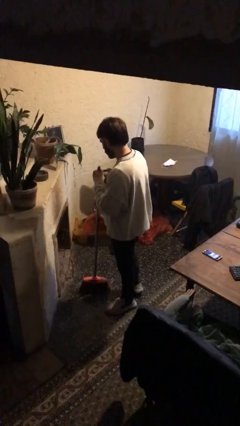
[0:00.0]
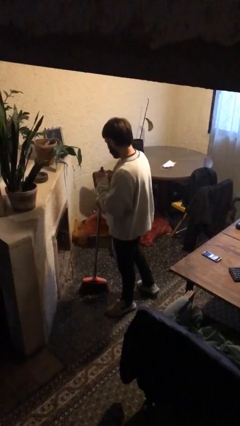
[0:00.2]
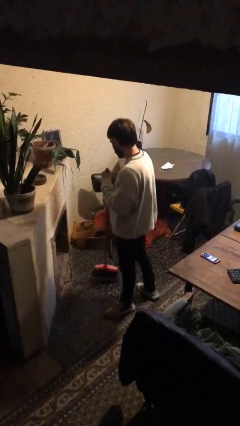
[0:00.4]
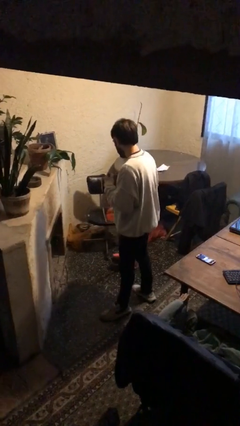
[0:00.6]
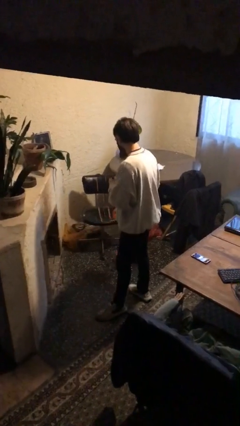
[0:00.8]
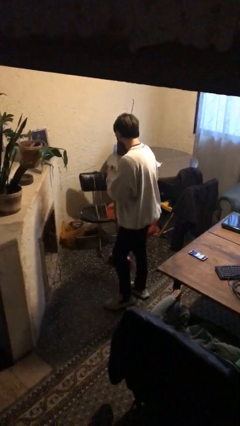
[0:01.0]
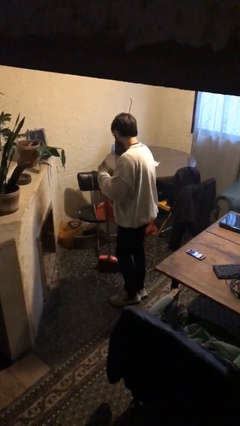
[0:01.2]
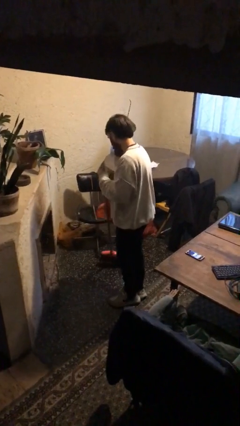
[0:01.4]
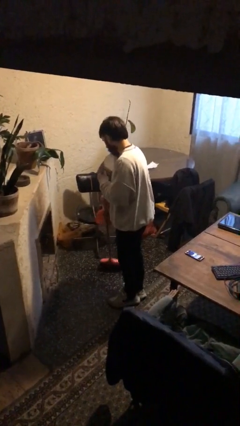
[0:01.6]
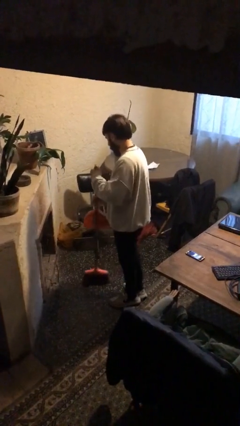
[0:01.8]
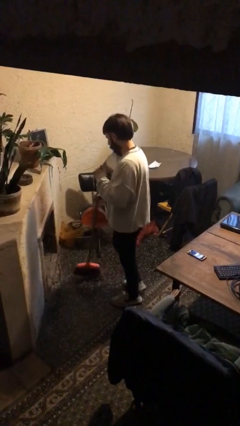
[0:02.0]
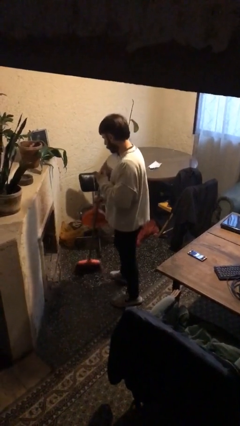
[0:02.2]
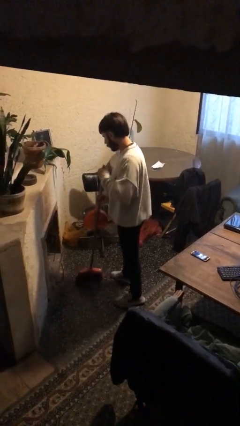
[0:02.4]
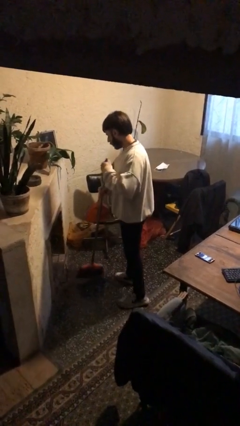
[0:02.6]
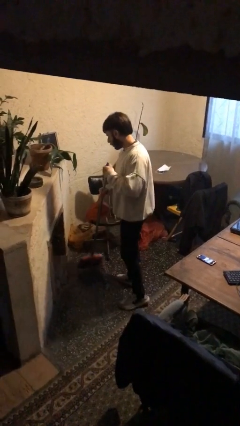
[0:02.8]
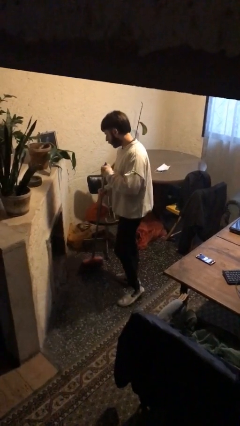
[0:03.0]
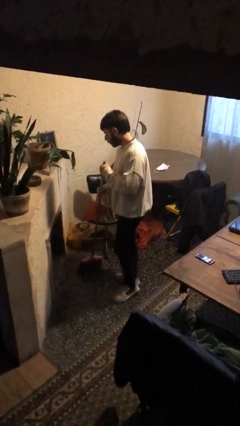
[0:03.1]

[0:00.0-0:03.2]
person sweeps floor

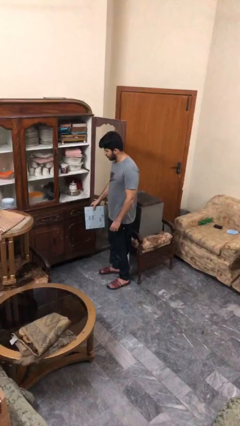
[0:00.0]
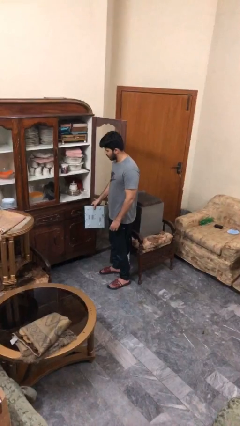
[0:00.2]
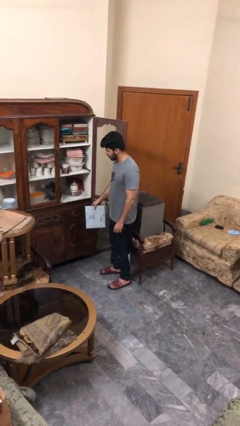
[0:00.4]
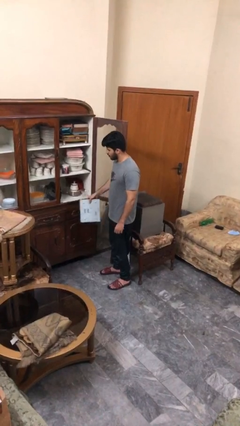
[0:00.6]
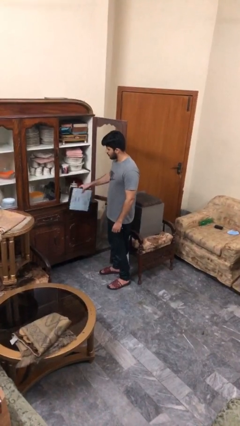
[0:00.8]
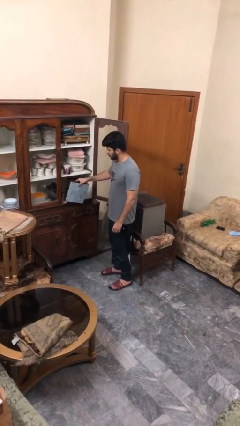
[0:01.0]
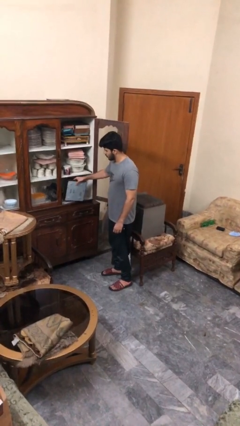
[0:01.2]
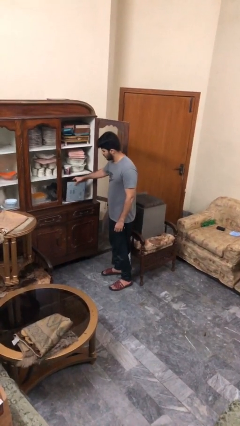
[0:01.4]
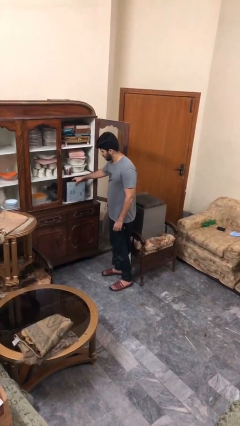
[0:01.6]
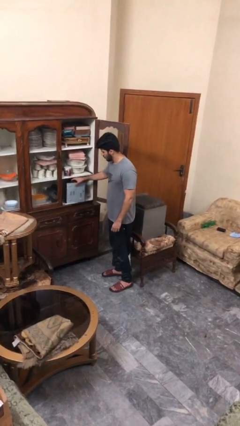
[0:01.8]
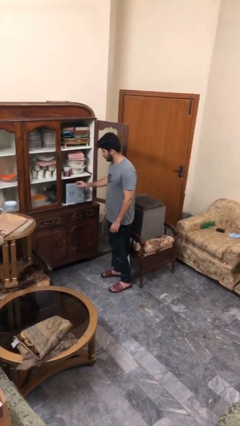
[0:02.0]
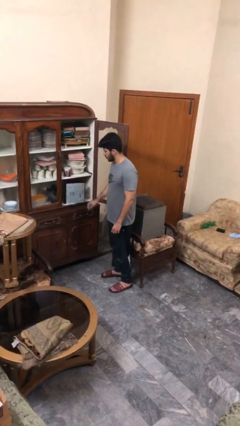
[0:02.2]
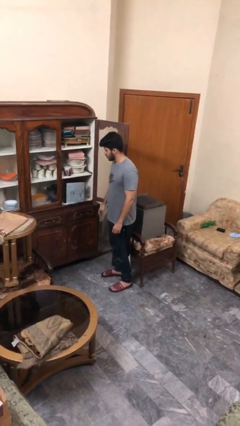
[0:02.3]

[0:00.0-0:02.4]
person puts down object on countertop

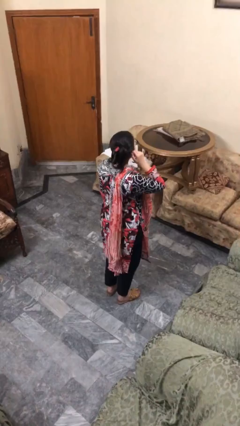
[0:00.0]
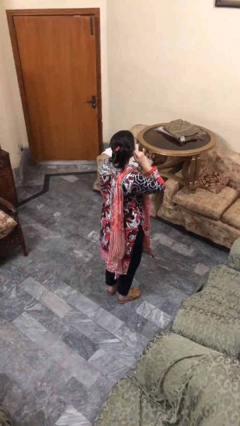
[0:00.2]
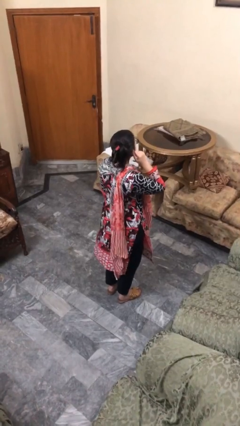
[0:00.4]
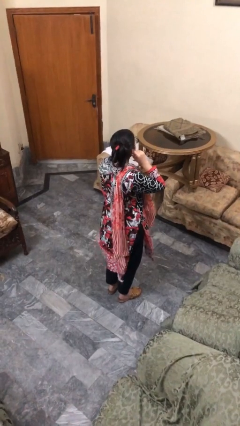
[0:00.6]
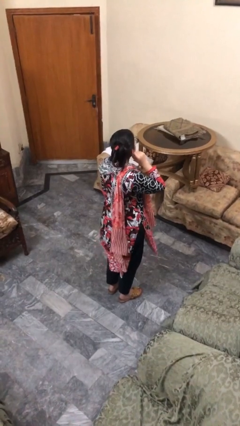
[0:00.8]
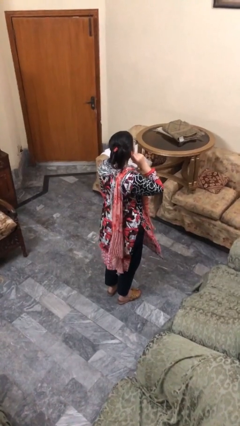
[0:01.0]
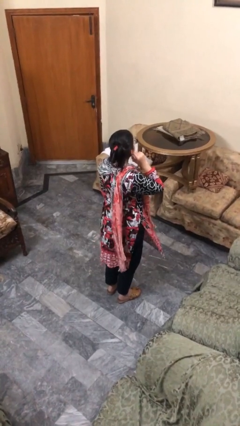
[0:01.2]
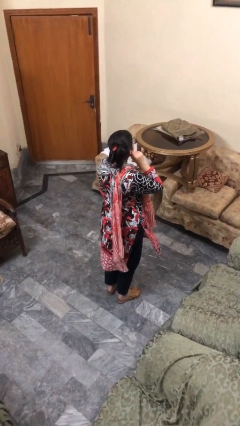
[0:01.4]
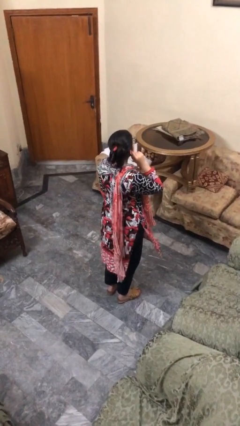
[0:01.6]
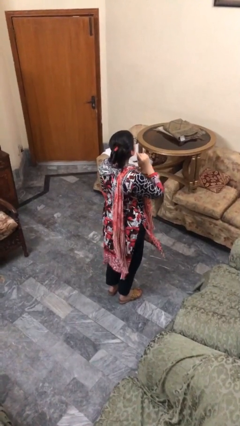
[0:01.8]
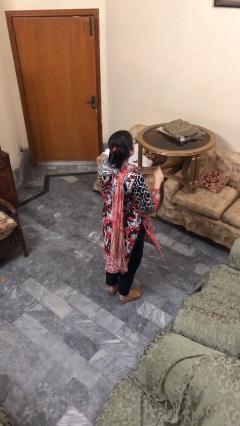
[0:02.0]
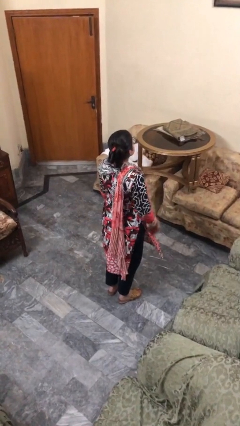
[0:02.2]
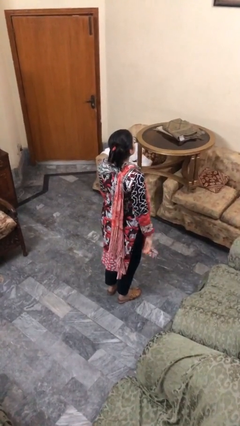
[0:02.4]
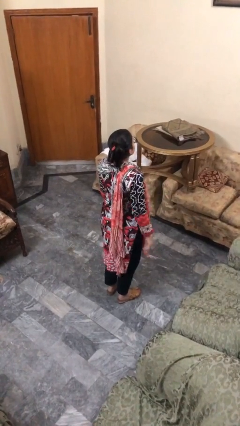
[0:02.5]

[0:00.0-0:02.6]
person touches earlobe

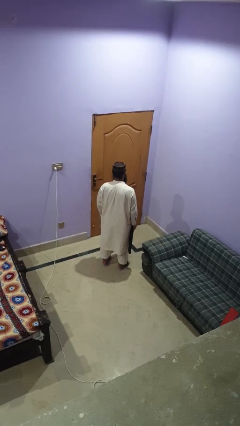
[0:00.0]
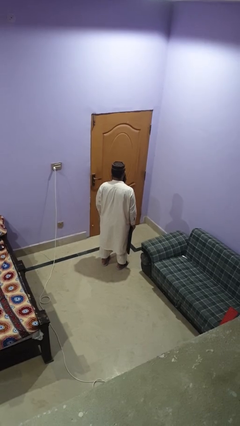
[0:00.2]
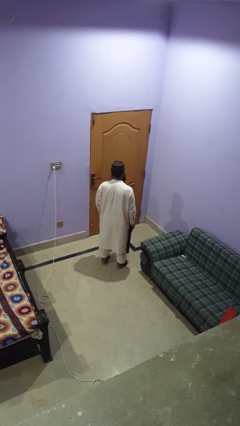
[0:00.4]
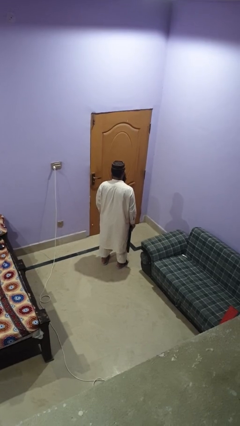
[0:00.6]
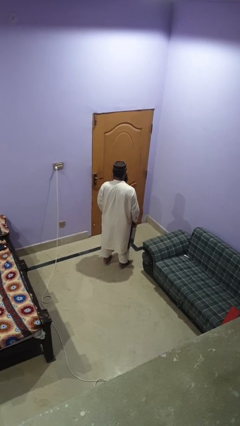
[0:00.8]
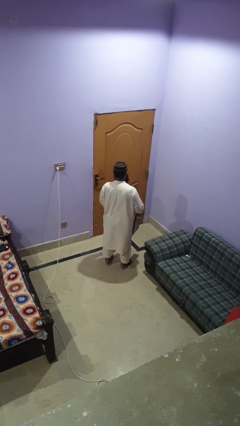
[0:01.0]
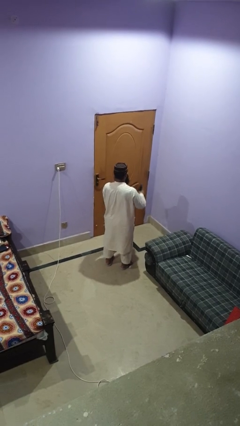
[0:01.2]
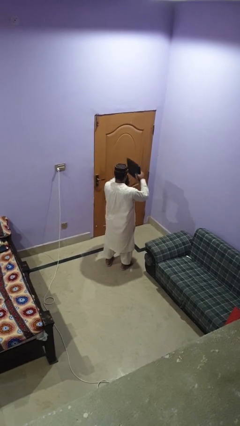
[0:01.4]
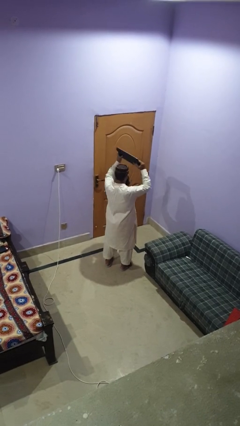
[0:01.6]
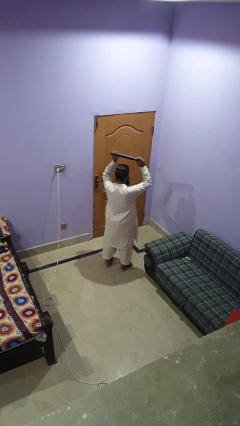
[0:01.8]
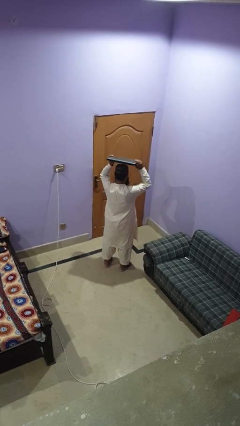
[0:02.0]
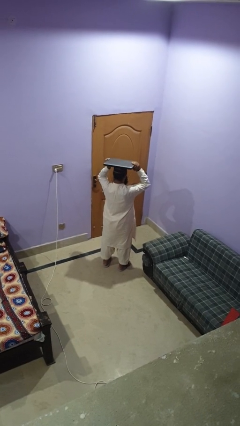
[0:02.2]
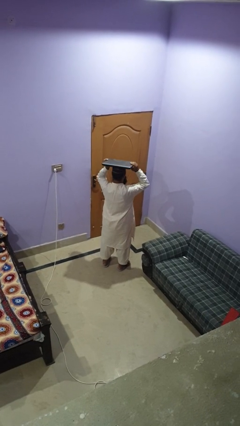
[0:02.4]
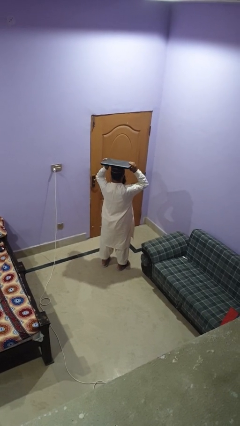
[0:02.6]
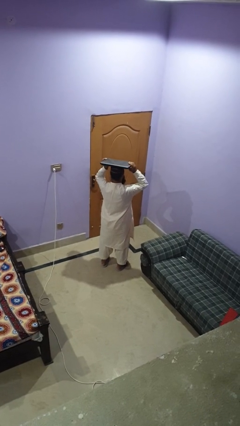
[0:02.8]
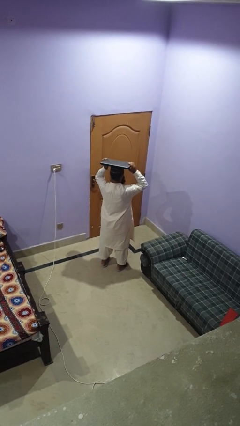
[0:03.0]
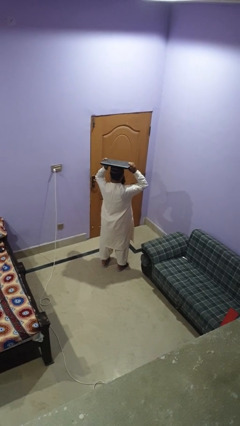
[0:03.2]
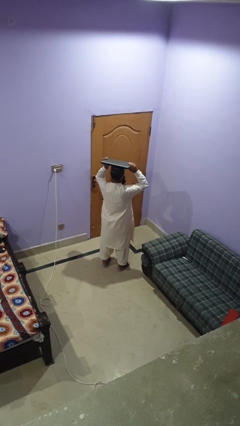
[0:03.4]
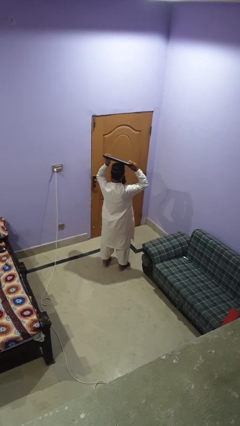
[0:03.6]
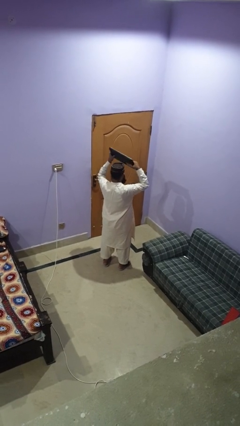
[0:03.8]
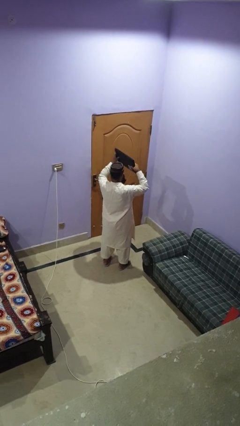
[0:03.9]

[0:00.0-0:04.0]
person holds object above head

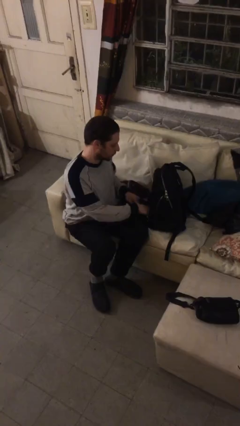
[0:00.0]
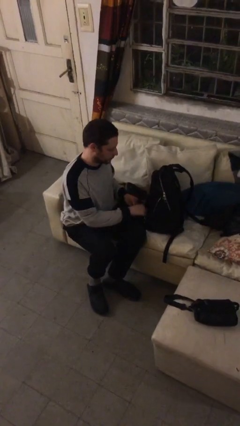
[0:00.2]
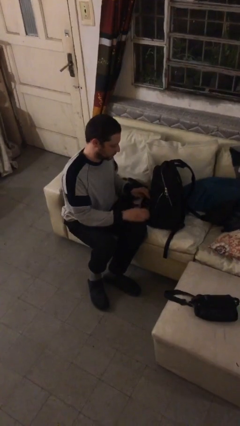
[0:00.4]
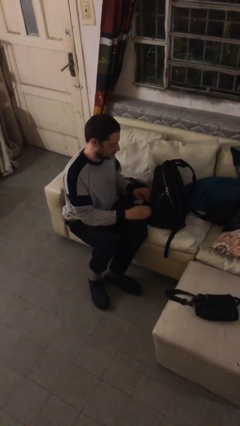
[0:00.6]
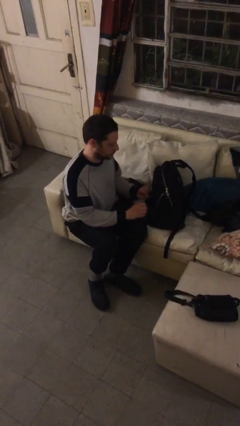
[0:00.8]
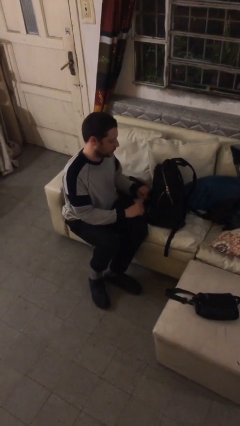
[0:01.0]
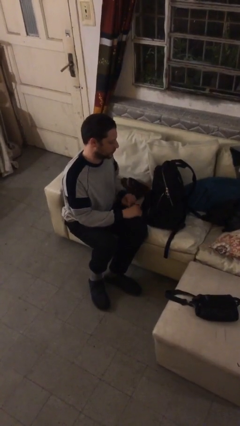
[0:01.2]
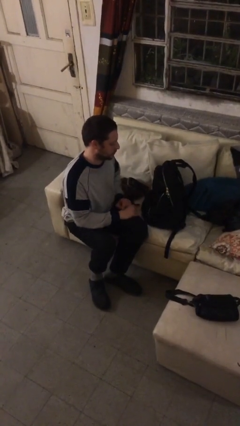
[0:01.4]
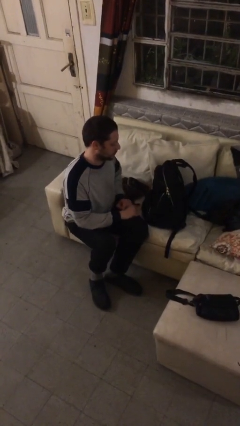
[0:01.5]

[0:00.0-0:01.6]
person puts object into backpack

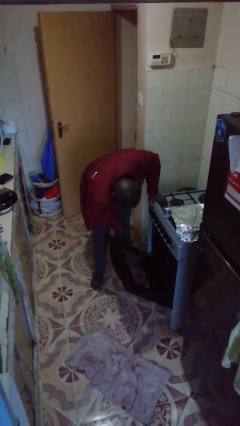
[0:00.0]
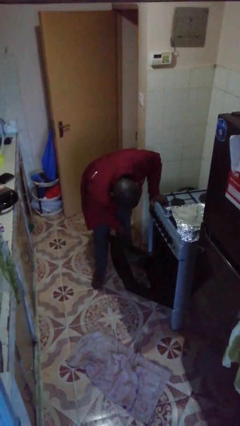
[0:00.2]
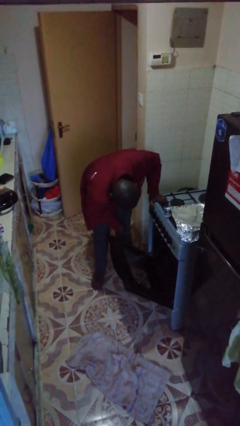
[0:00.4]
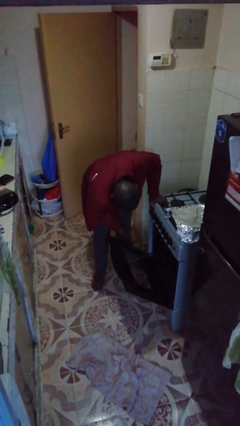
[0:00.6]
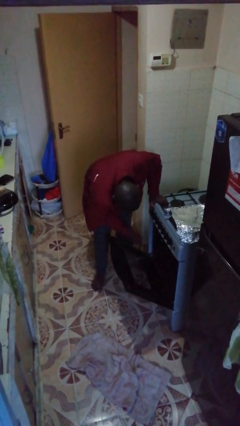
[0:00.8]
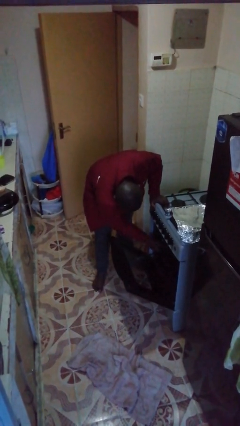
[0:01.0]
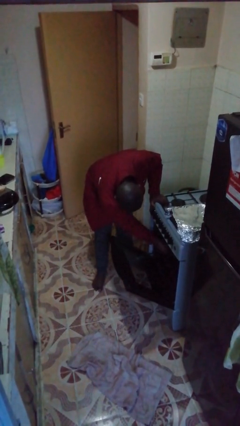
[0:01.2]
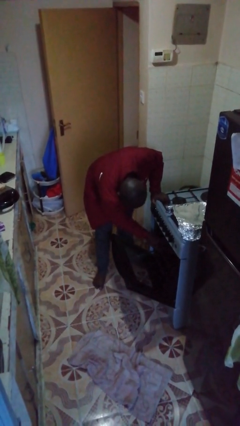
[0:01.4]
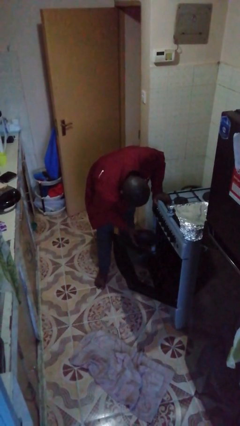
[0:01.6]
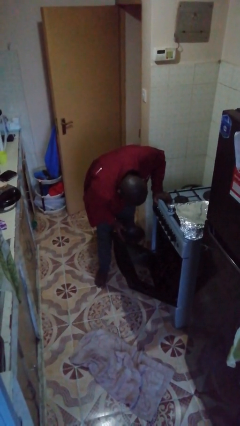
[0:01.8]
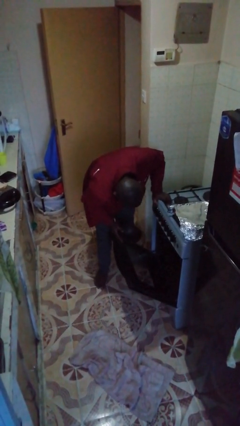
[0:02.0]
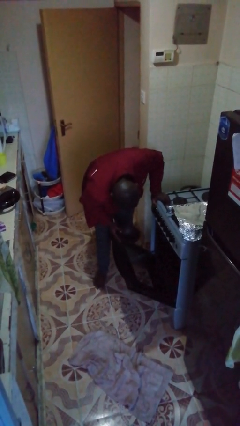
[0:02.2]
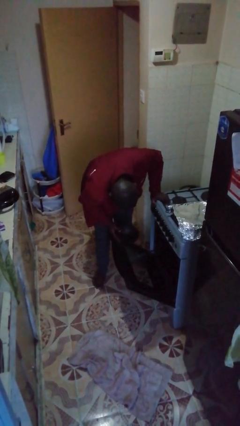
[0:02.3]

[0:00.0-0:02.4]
person takes object from oven

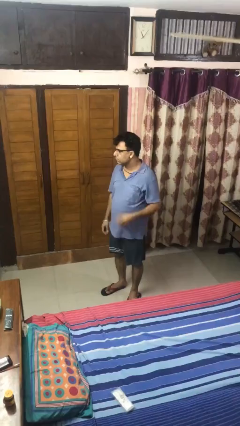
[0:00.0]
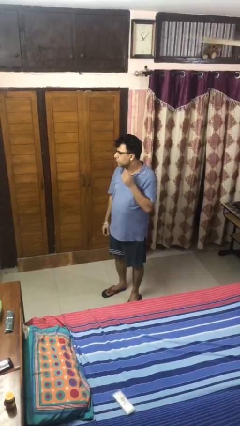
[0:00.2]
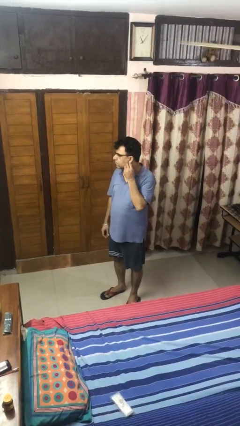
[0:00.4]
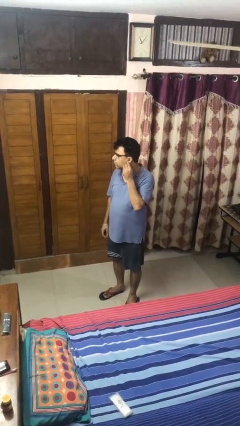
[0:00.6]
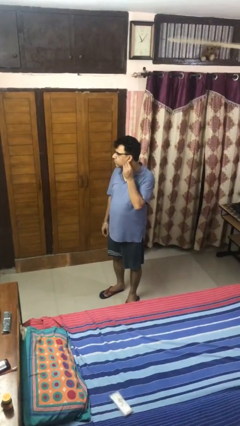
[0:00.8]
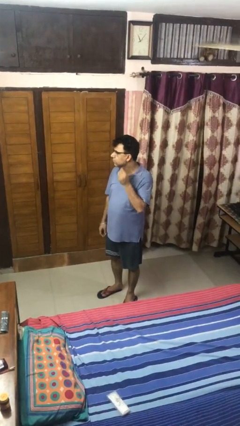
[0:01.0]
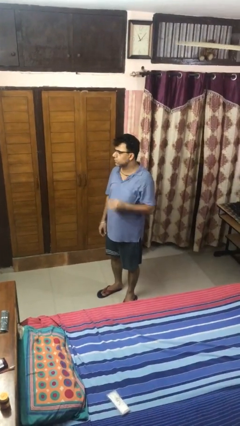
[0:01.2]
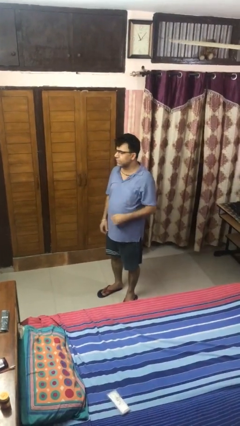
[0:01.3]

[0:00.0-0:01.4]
person takes off earrings
